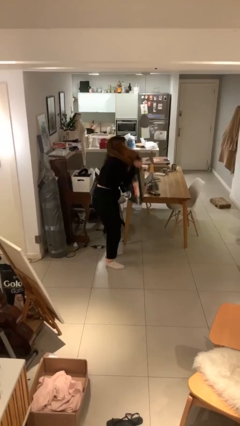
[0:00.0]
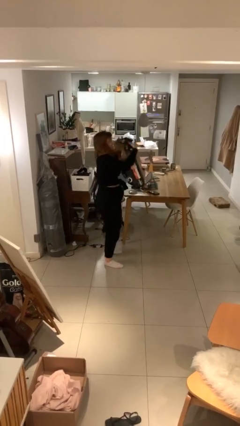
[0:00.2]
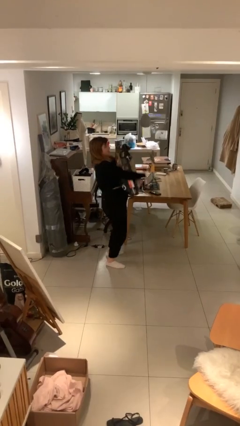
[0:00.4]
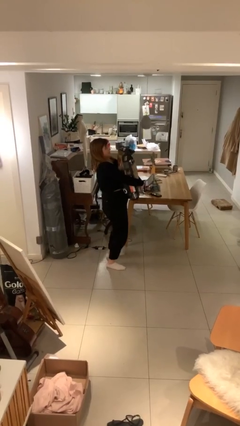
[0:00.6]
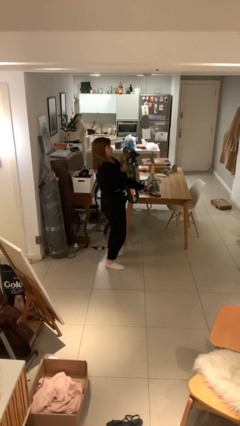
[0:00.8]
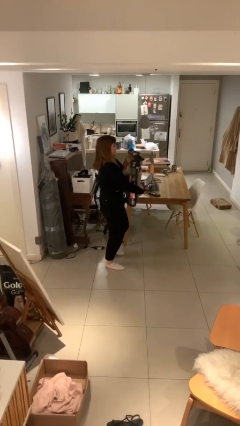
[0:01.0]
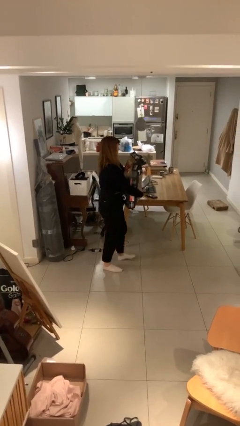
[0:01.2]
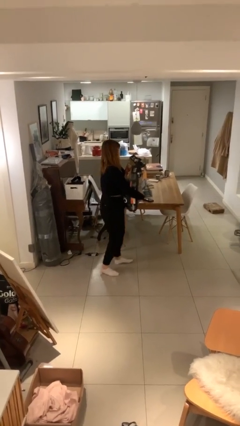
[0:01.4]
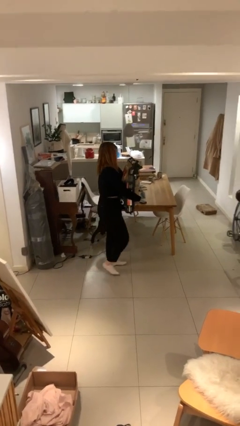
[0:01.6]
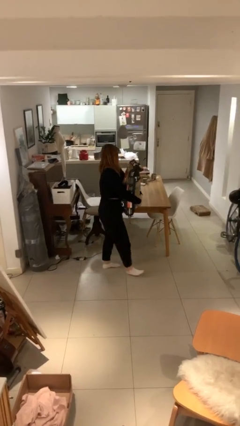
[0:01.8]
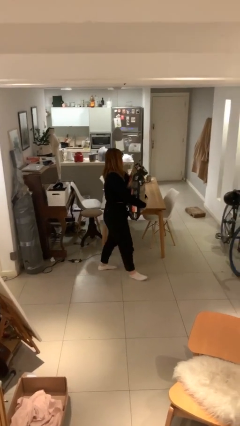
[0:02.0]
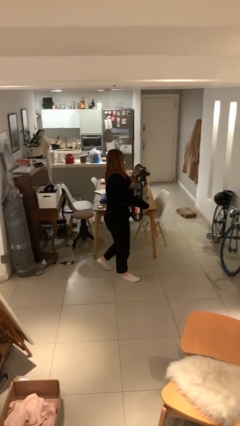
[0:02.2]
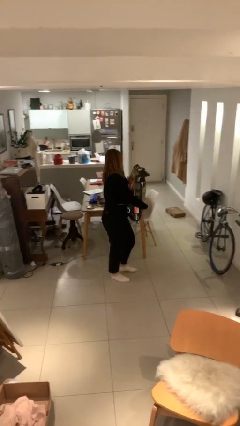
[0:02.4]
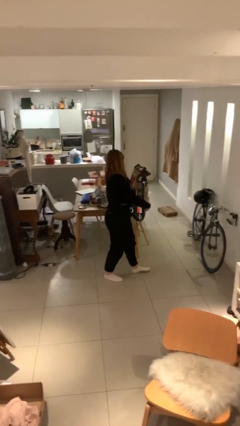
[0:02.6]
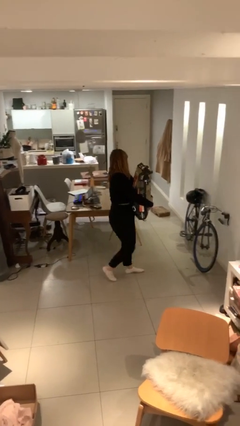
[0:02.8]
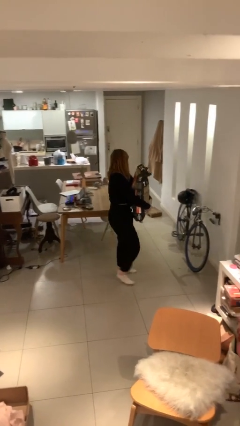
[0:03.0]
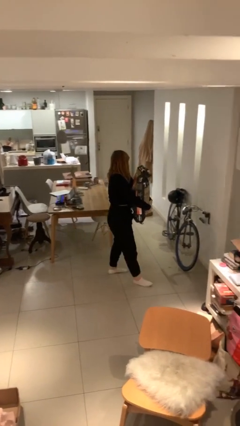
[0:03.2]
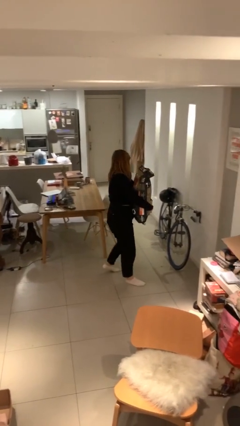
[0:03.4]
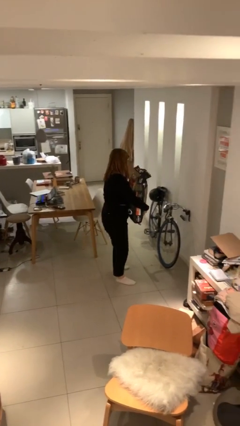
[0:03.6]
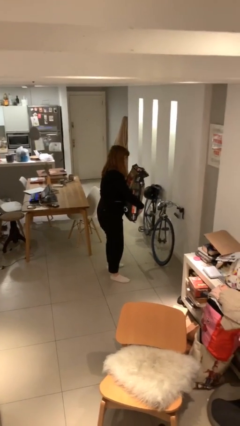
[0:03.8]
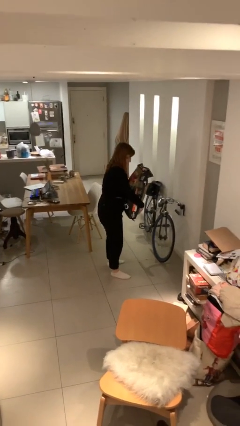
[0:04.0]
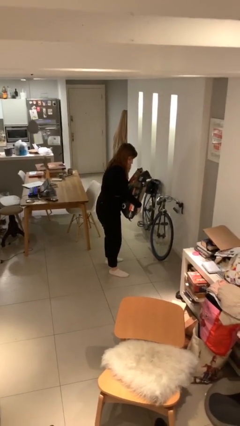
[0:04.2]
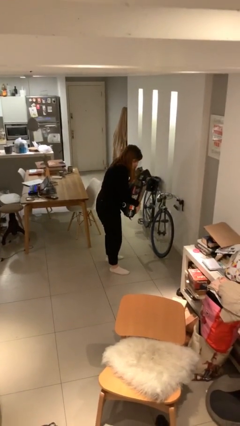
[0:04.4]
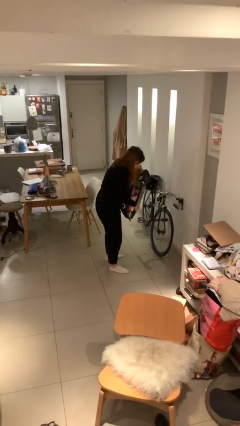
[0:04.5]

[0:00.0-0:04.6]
person carries heavy object

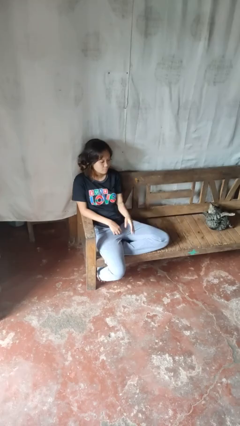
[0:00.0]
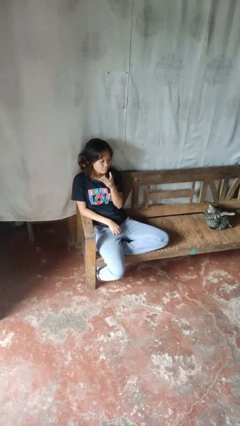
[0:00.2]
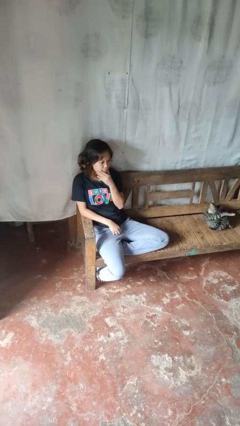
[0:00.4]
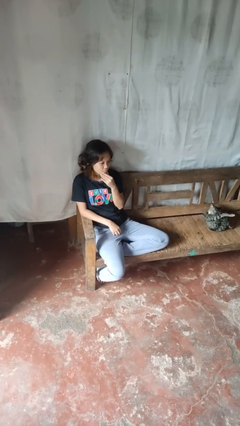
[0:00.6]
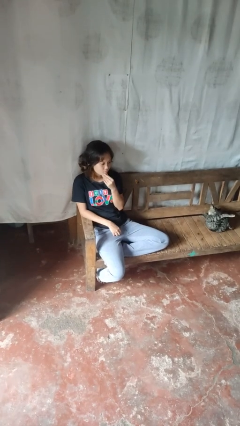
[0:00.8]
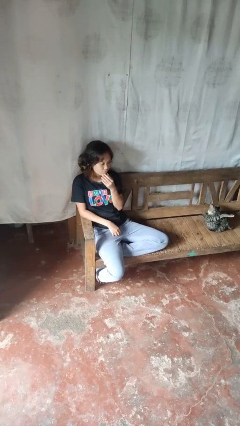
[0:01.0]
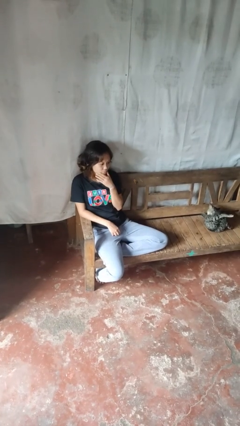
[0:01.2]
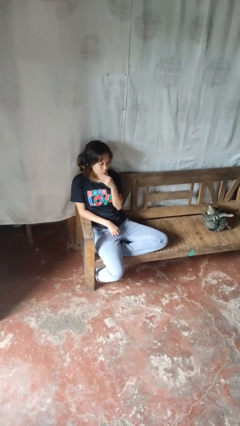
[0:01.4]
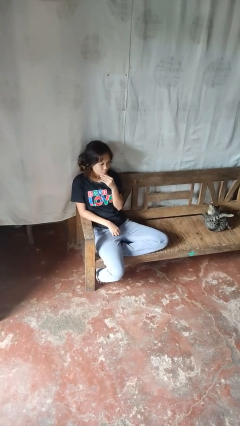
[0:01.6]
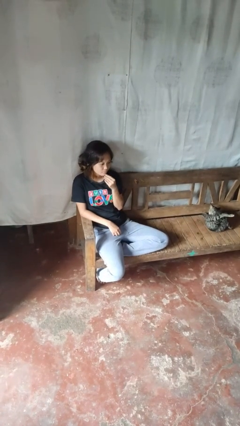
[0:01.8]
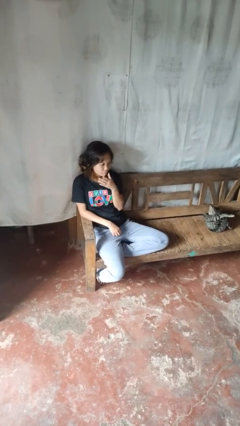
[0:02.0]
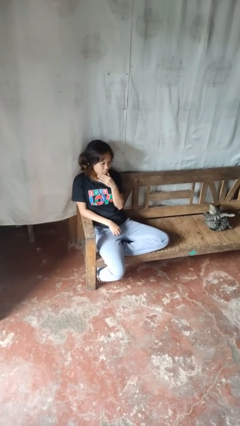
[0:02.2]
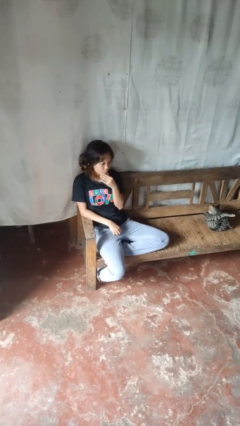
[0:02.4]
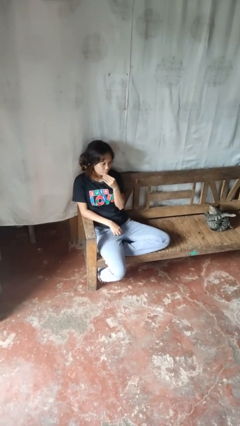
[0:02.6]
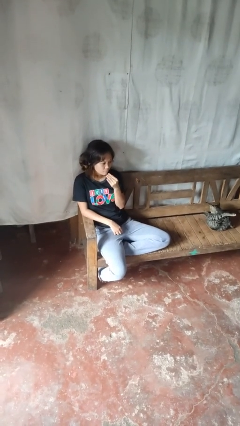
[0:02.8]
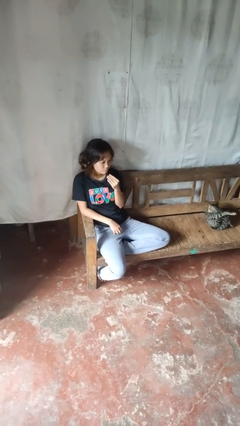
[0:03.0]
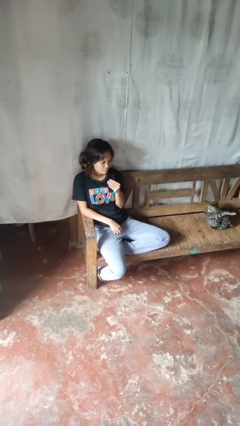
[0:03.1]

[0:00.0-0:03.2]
person strokes chin

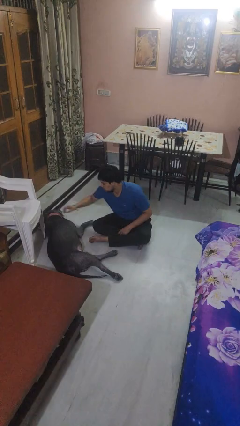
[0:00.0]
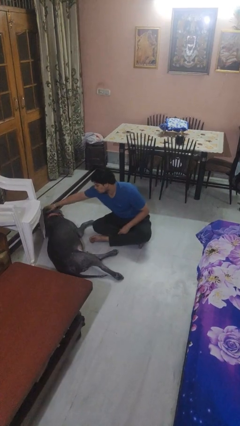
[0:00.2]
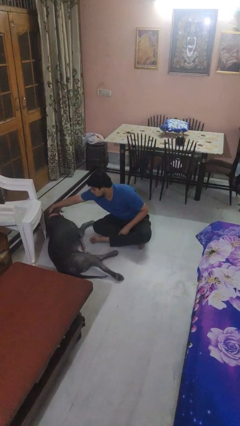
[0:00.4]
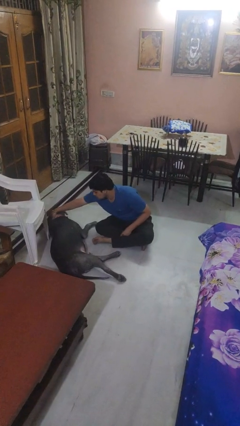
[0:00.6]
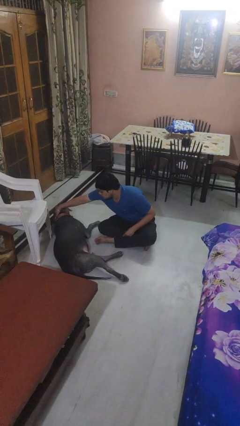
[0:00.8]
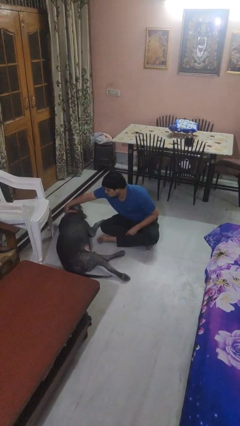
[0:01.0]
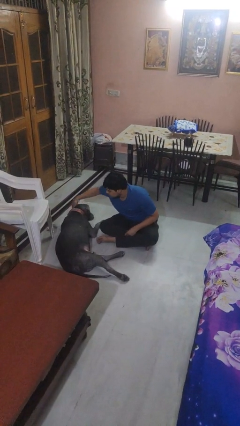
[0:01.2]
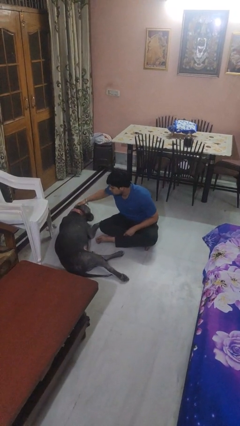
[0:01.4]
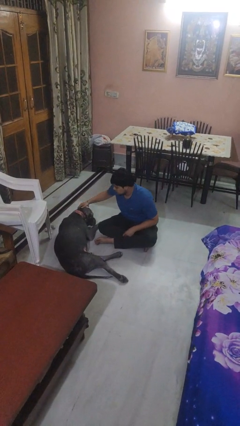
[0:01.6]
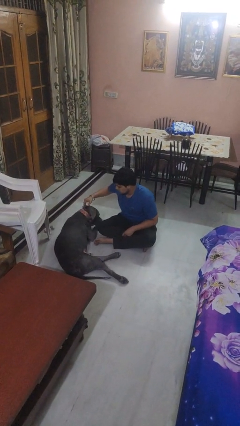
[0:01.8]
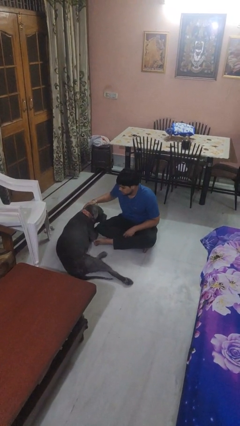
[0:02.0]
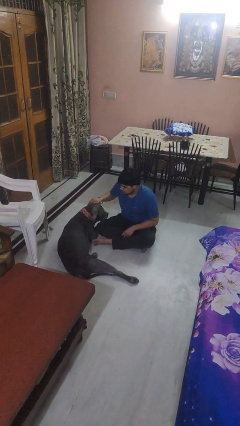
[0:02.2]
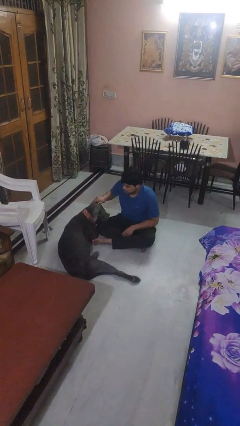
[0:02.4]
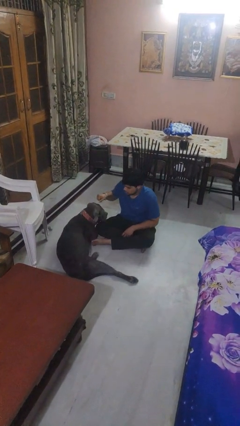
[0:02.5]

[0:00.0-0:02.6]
person pets dog

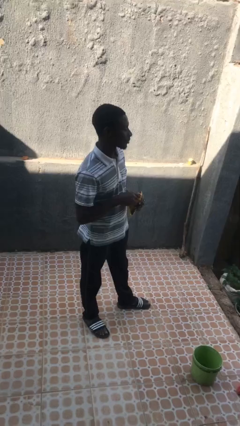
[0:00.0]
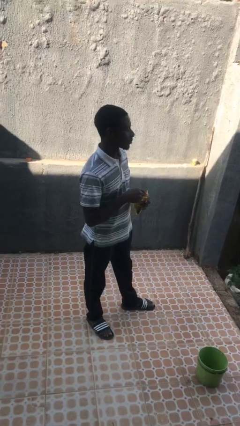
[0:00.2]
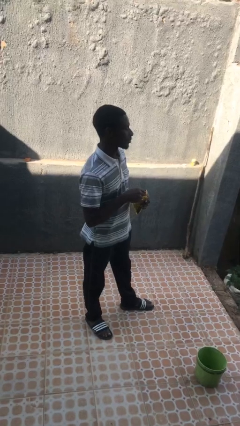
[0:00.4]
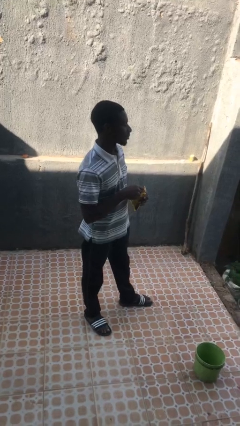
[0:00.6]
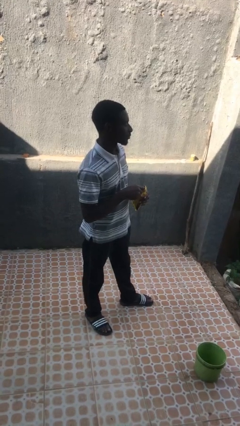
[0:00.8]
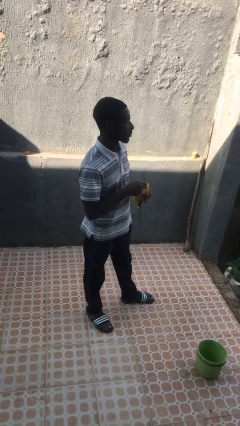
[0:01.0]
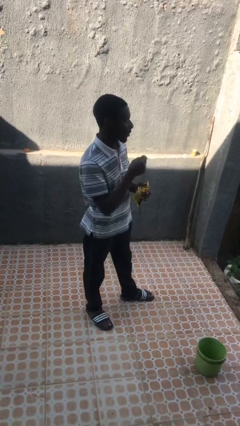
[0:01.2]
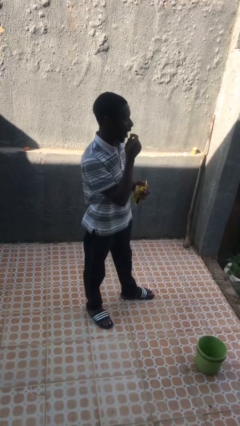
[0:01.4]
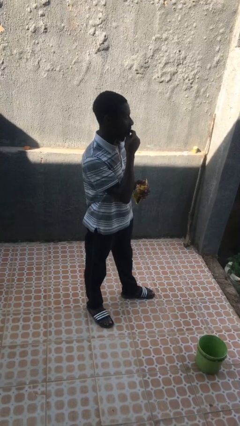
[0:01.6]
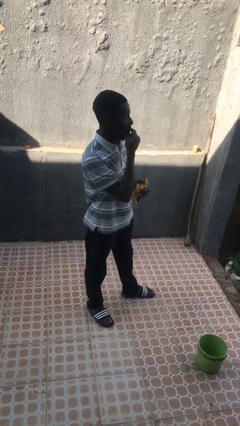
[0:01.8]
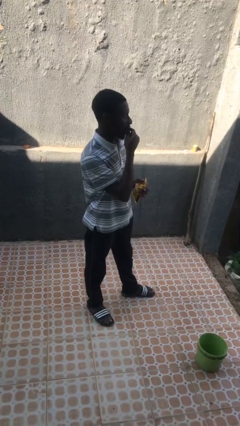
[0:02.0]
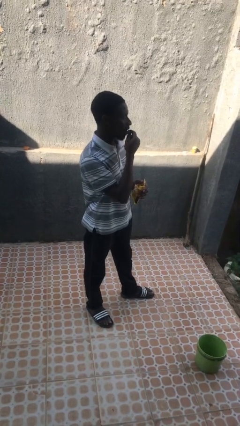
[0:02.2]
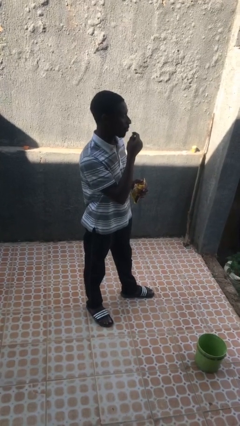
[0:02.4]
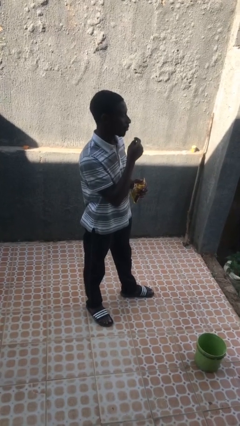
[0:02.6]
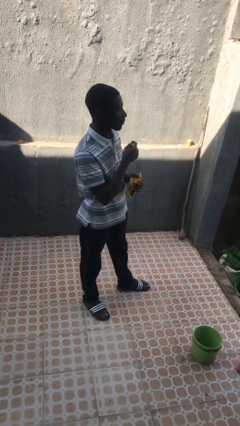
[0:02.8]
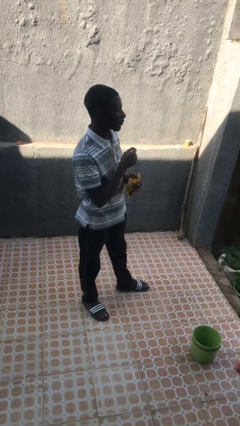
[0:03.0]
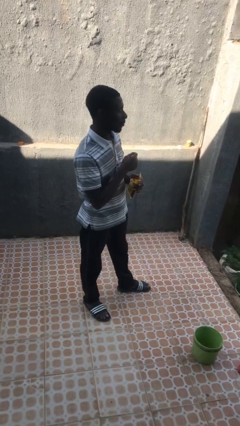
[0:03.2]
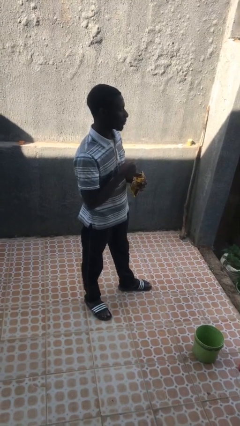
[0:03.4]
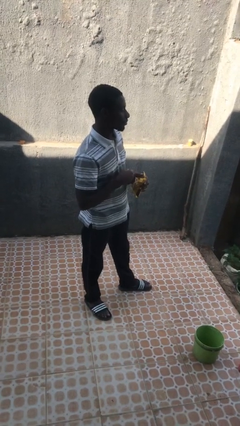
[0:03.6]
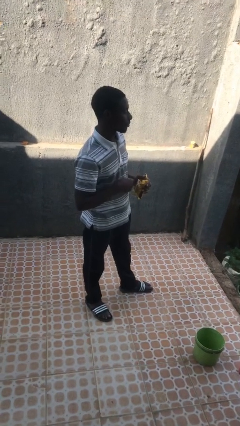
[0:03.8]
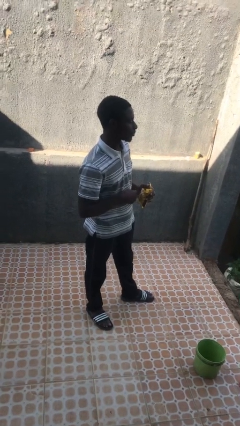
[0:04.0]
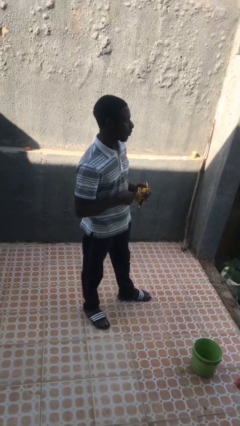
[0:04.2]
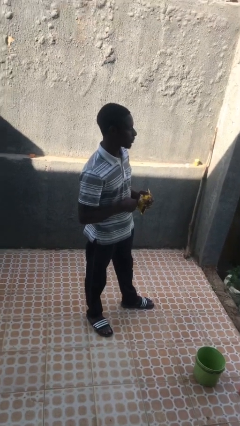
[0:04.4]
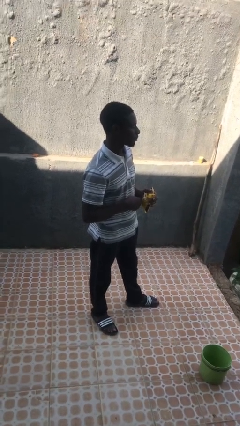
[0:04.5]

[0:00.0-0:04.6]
person eats snack from bag

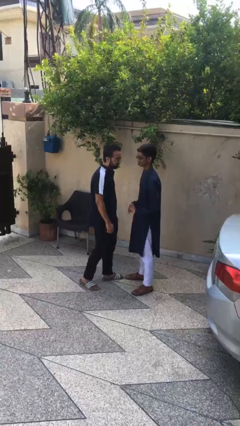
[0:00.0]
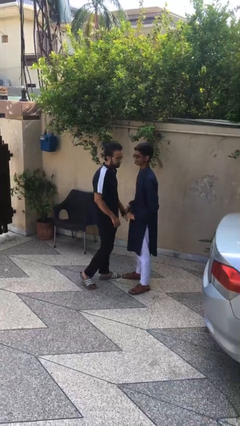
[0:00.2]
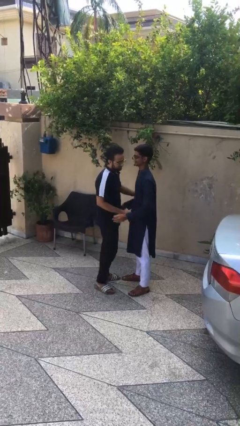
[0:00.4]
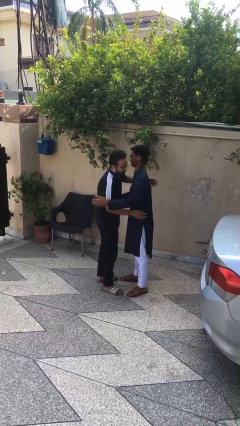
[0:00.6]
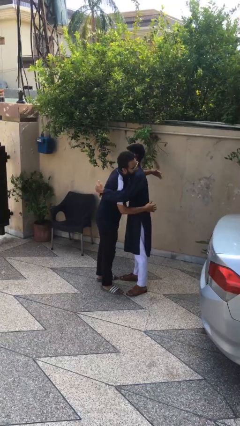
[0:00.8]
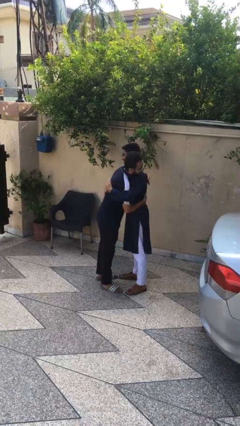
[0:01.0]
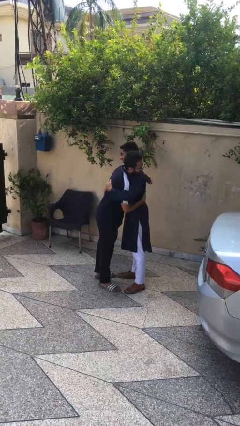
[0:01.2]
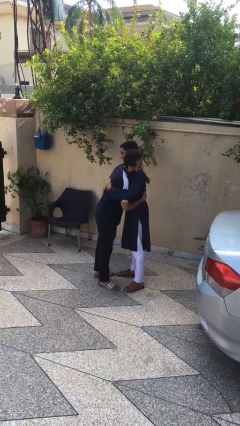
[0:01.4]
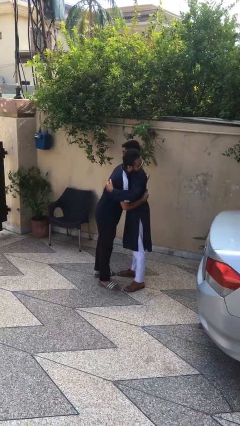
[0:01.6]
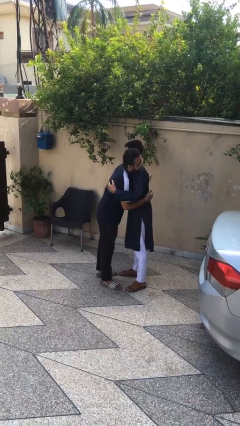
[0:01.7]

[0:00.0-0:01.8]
person embraces person

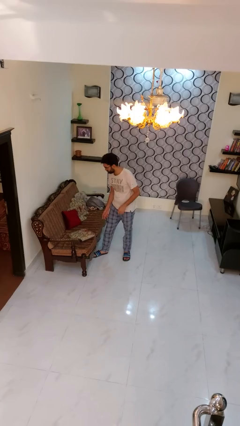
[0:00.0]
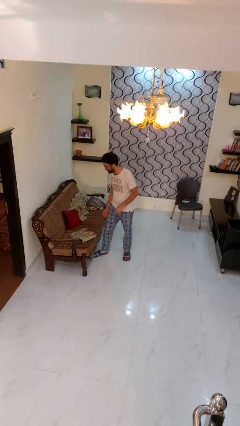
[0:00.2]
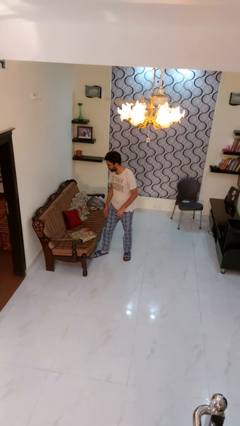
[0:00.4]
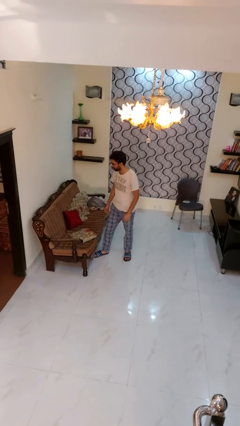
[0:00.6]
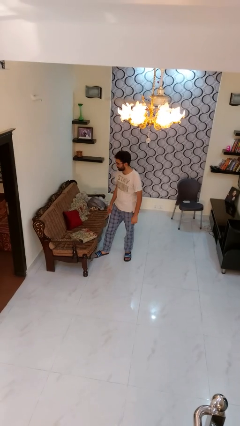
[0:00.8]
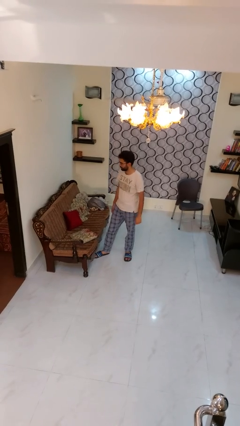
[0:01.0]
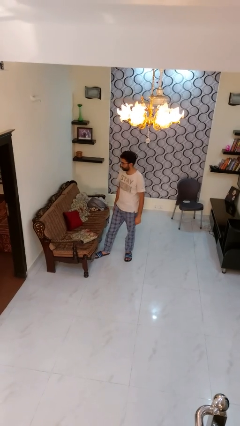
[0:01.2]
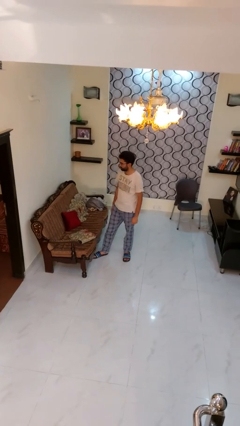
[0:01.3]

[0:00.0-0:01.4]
person puts down object on couch
